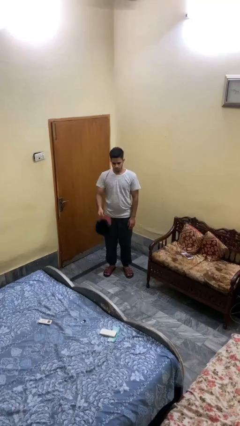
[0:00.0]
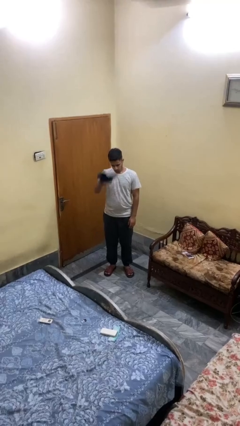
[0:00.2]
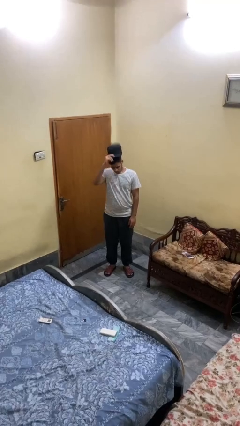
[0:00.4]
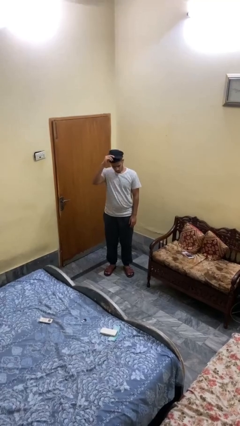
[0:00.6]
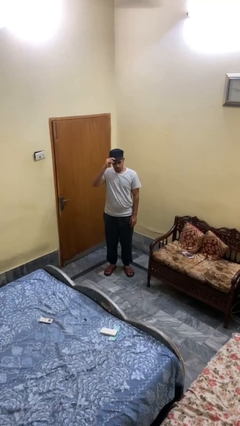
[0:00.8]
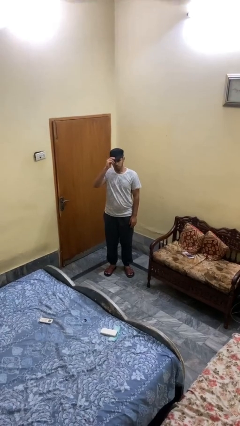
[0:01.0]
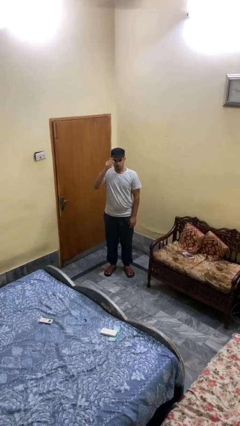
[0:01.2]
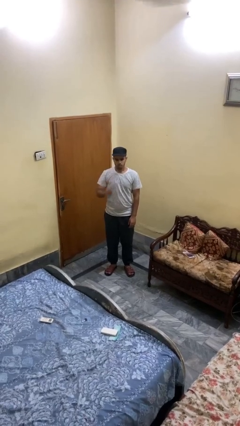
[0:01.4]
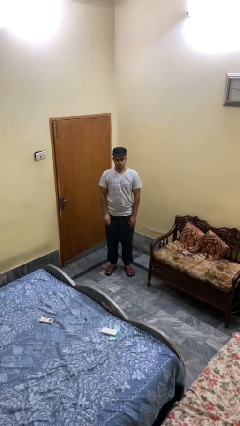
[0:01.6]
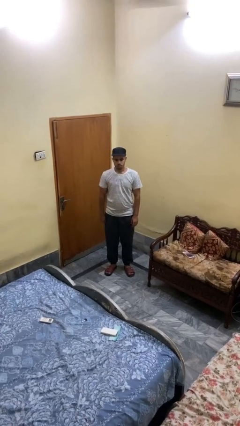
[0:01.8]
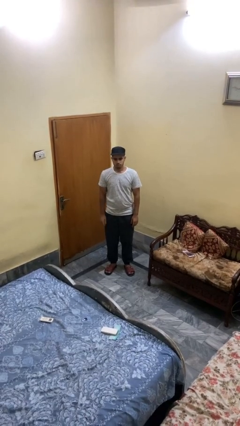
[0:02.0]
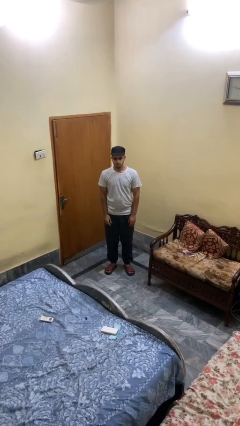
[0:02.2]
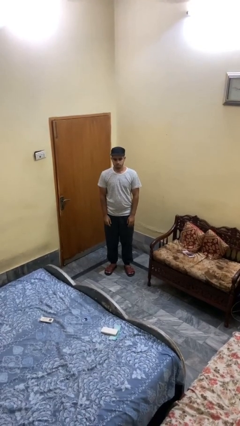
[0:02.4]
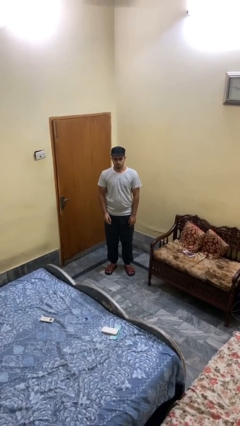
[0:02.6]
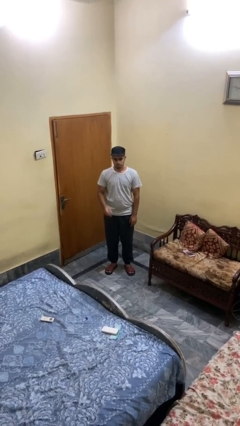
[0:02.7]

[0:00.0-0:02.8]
person puts on hat

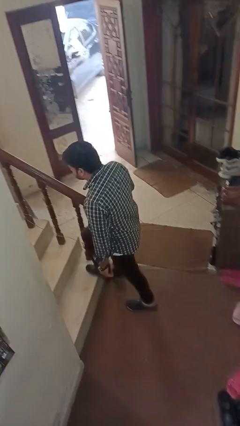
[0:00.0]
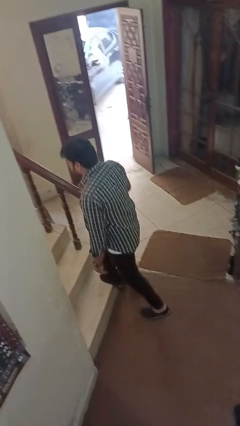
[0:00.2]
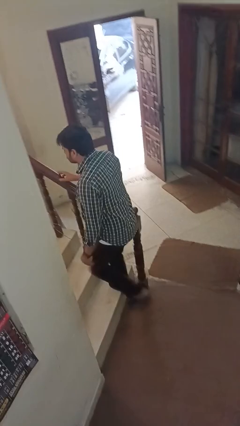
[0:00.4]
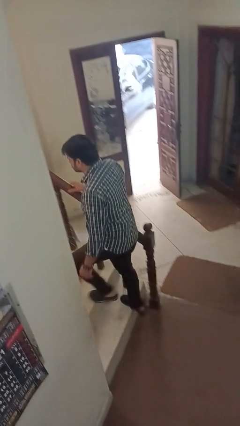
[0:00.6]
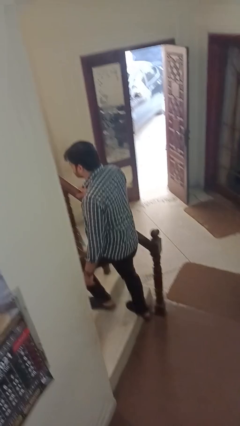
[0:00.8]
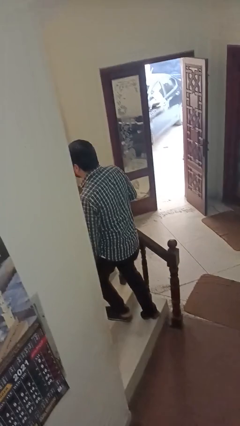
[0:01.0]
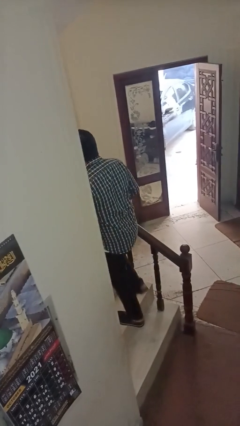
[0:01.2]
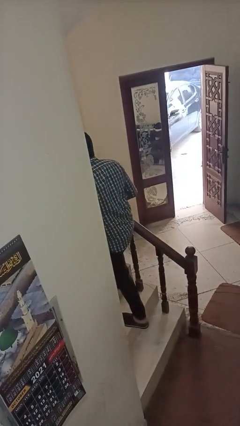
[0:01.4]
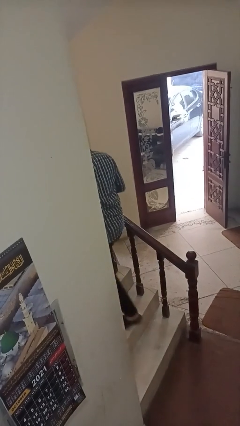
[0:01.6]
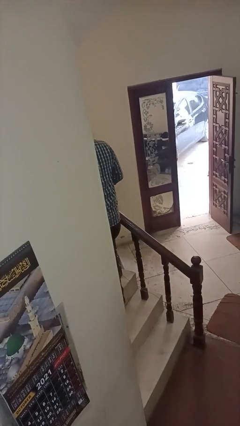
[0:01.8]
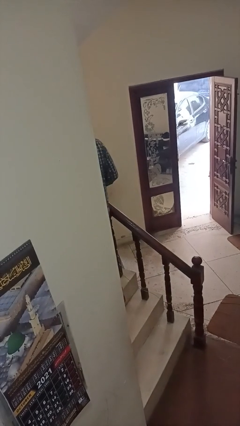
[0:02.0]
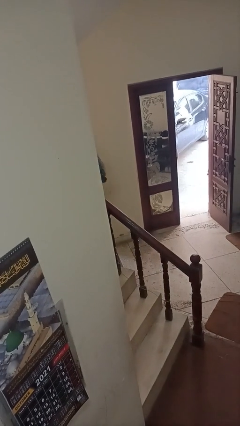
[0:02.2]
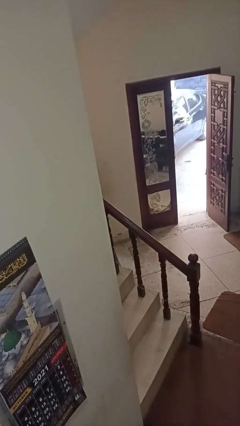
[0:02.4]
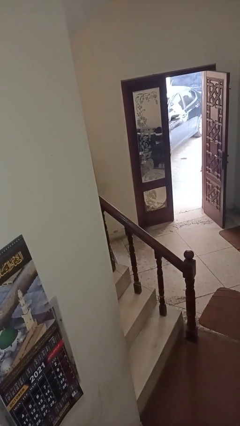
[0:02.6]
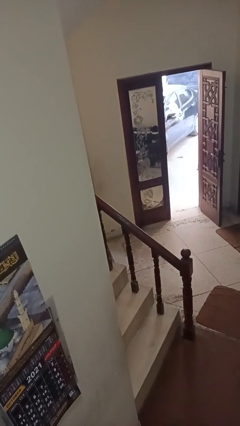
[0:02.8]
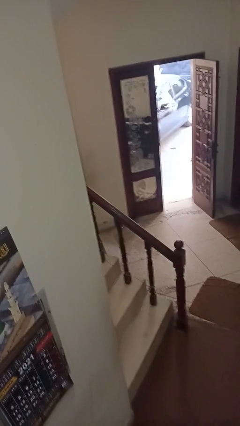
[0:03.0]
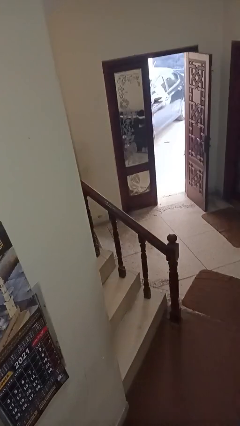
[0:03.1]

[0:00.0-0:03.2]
person climbs up stairs

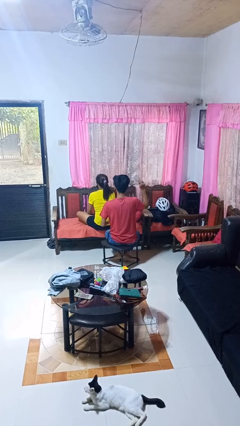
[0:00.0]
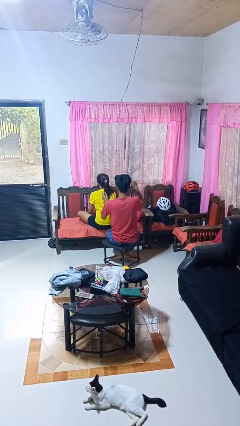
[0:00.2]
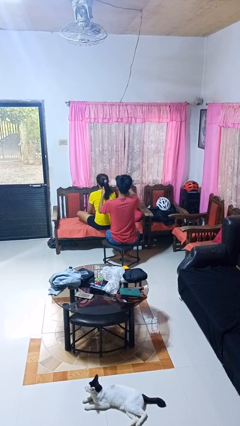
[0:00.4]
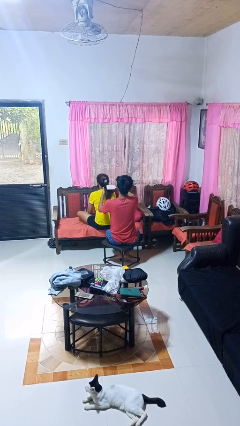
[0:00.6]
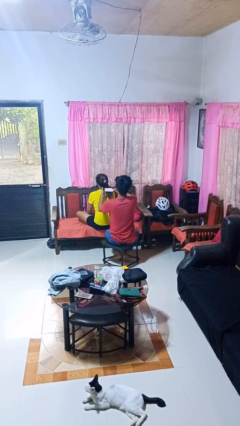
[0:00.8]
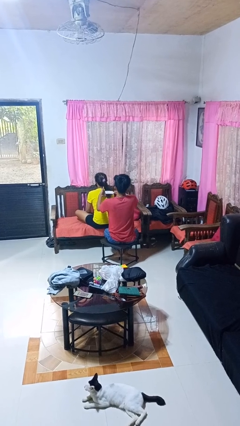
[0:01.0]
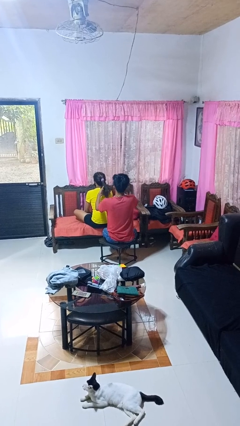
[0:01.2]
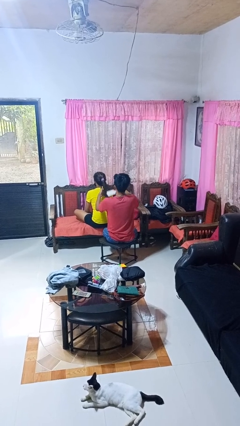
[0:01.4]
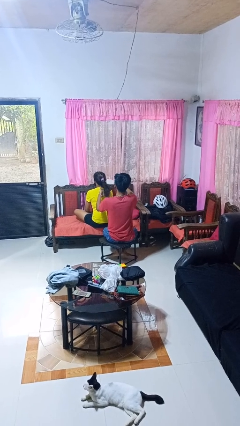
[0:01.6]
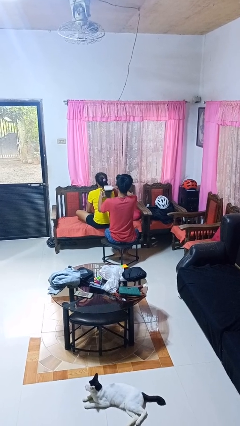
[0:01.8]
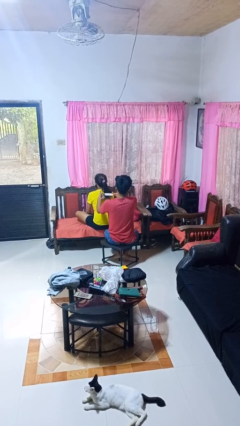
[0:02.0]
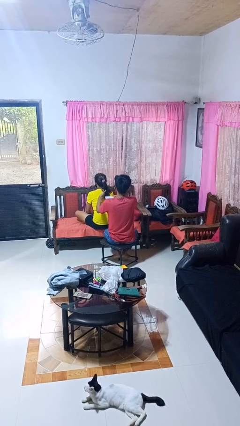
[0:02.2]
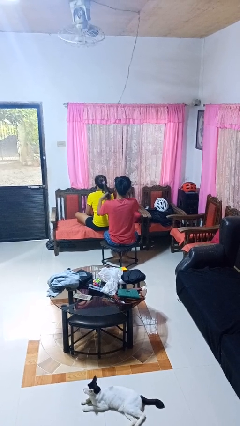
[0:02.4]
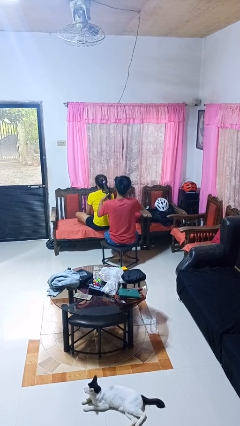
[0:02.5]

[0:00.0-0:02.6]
person brushes hair of person

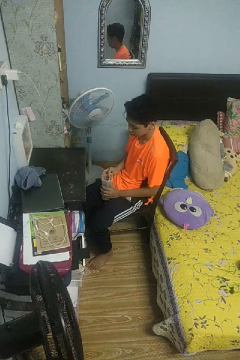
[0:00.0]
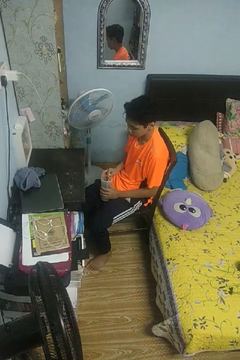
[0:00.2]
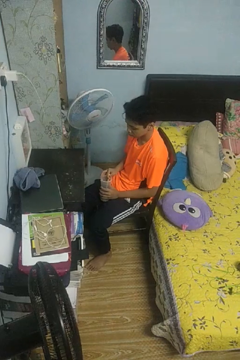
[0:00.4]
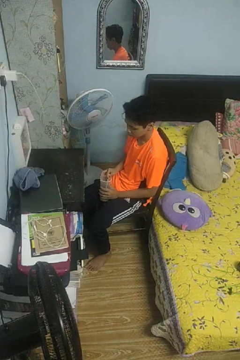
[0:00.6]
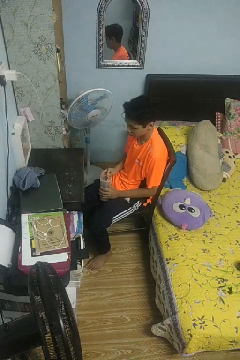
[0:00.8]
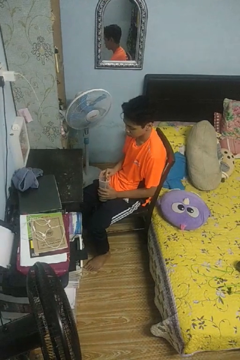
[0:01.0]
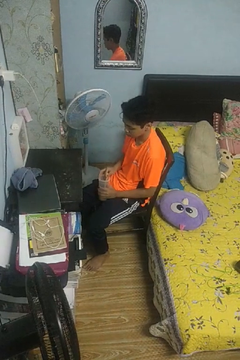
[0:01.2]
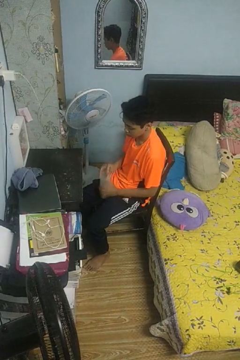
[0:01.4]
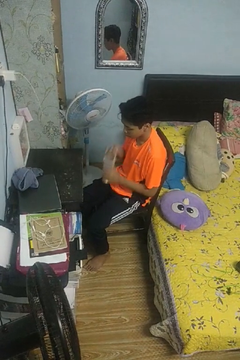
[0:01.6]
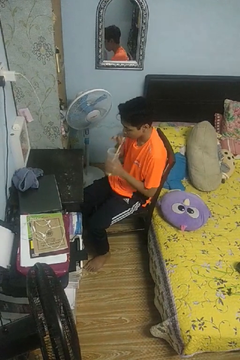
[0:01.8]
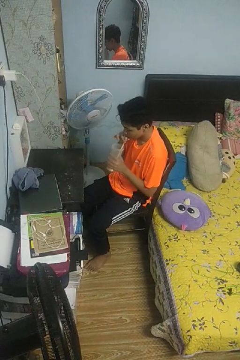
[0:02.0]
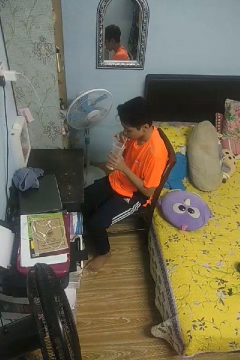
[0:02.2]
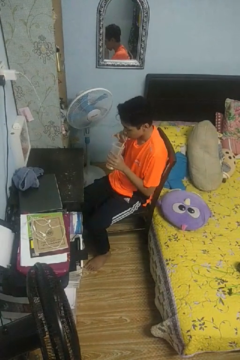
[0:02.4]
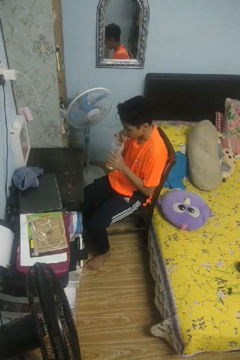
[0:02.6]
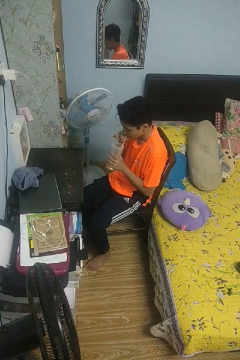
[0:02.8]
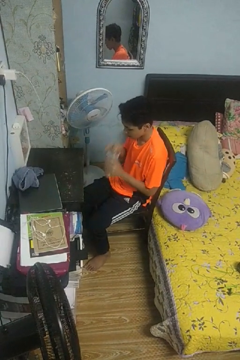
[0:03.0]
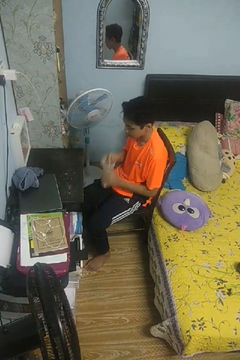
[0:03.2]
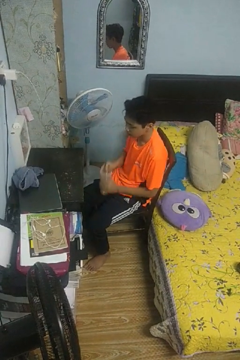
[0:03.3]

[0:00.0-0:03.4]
person drinks from straw

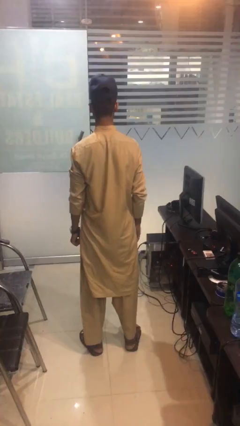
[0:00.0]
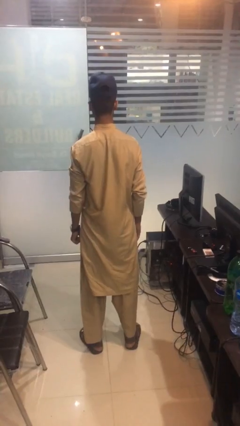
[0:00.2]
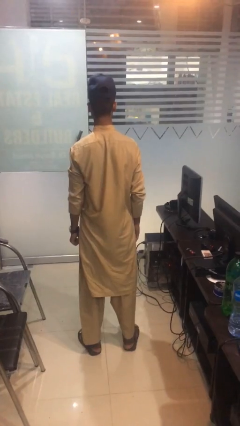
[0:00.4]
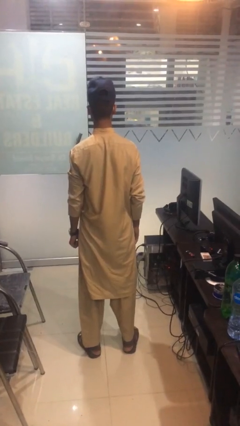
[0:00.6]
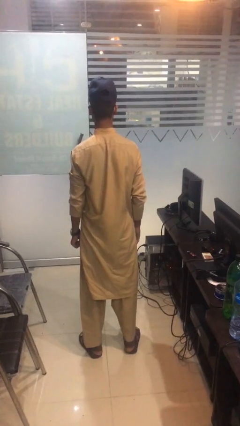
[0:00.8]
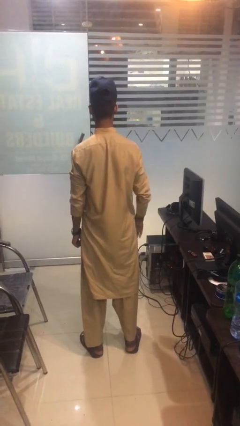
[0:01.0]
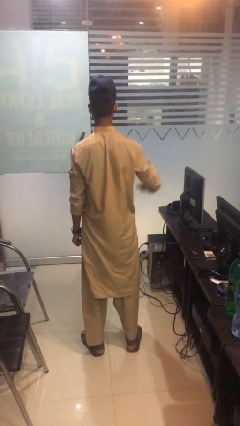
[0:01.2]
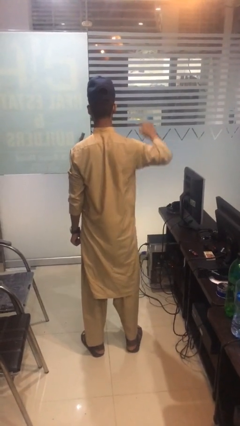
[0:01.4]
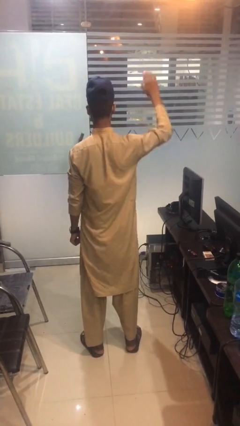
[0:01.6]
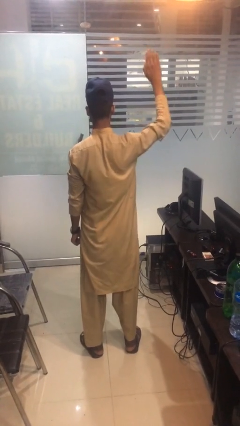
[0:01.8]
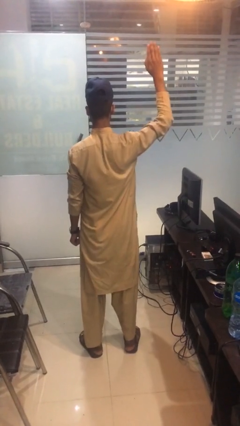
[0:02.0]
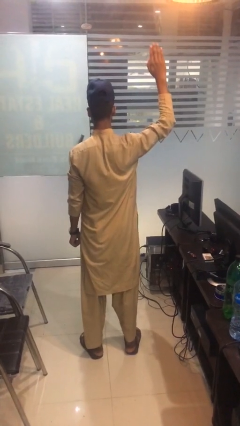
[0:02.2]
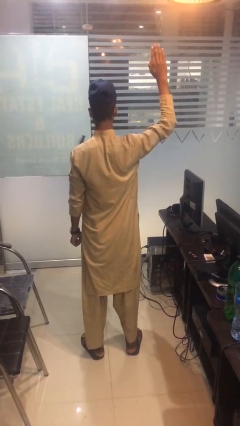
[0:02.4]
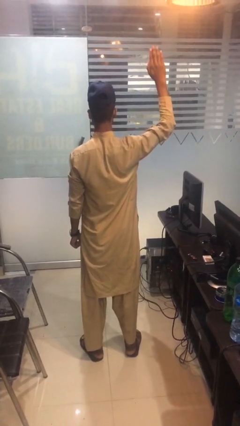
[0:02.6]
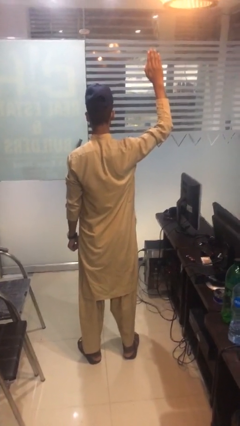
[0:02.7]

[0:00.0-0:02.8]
person gestures raise hand

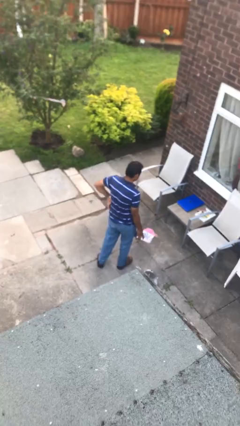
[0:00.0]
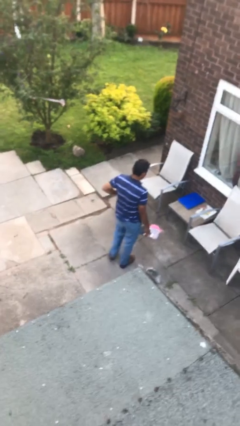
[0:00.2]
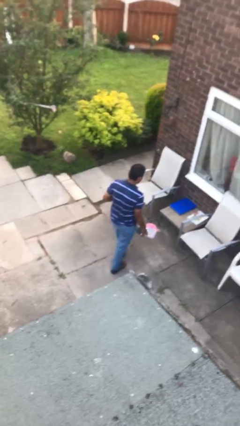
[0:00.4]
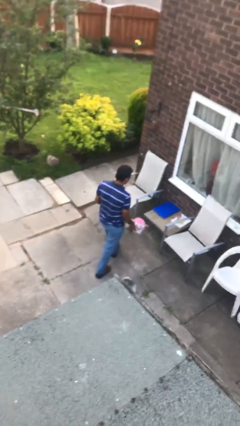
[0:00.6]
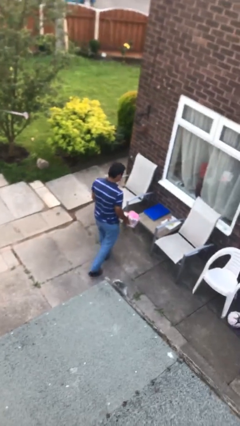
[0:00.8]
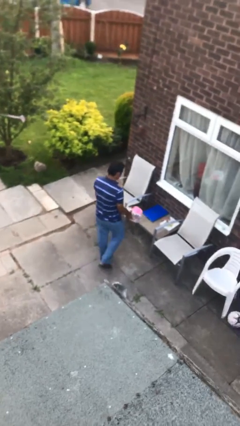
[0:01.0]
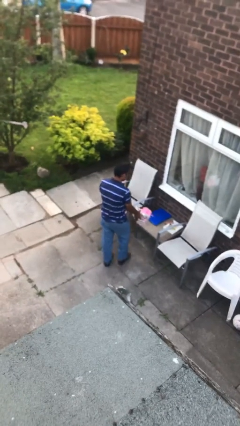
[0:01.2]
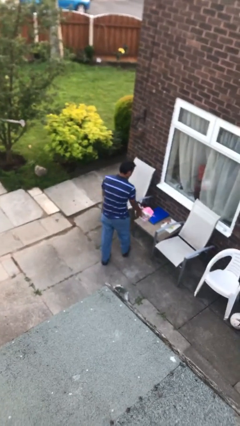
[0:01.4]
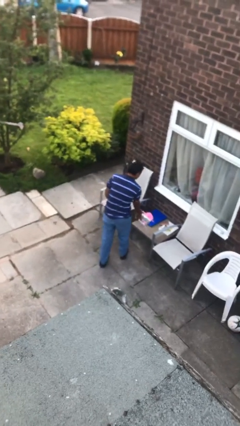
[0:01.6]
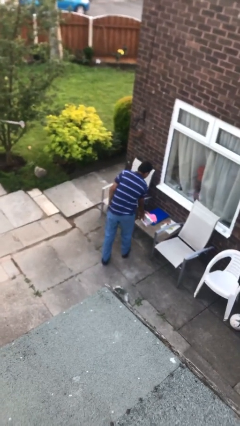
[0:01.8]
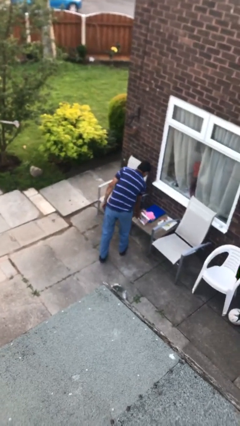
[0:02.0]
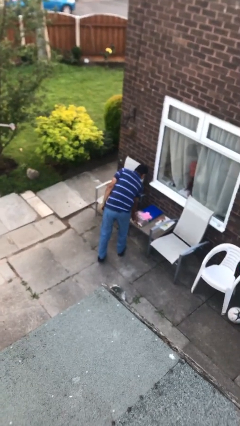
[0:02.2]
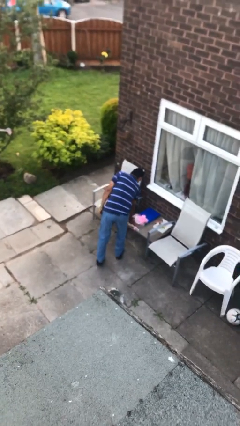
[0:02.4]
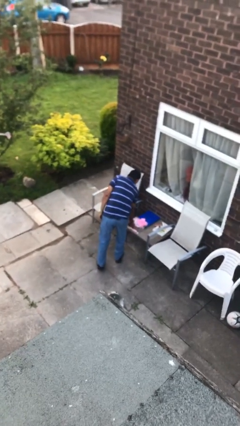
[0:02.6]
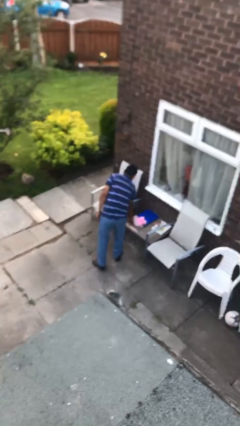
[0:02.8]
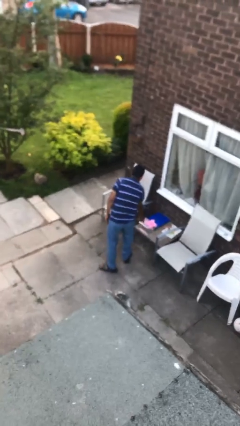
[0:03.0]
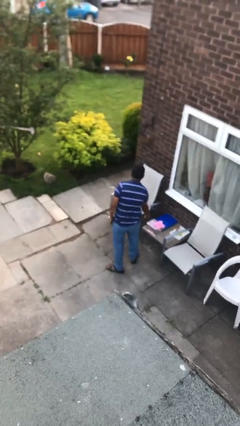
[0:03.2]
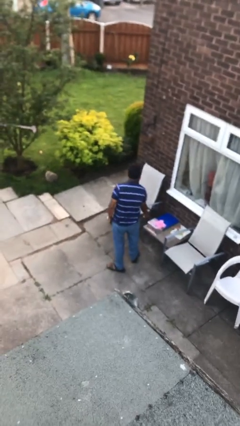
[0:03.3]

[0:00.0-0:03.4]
person puts down object on table
